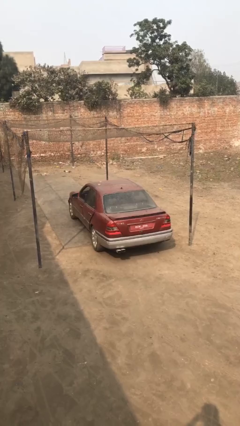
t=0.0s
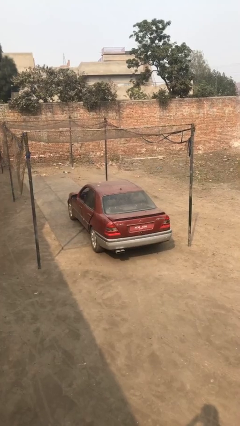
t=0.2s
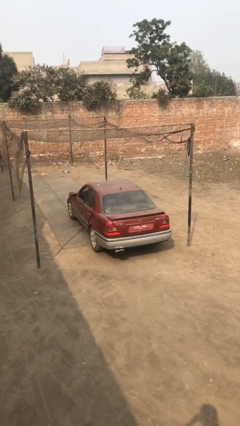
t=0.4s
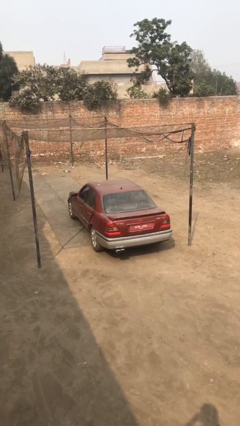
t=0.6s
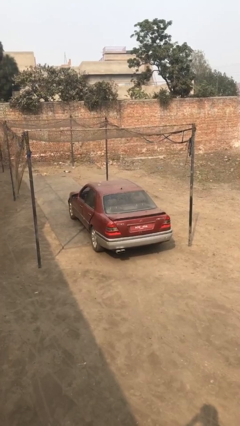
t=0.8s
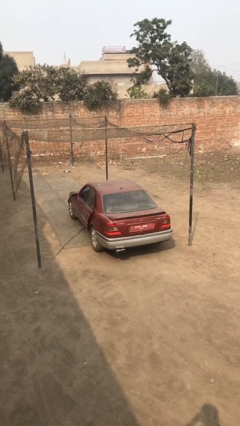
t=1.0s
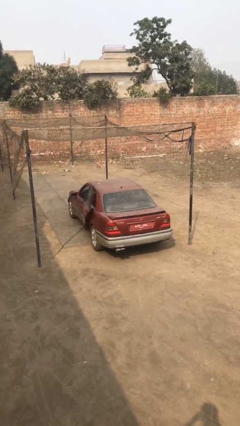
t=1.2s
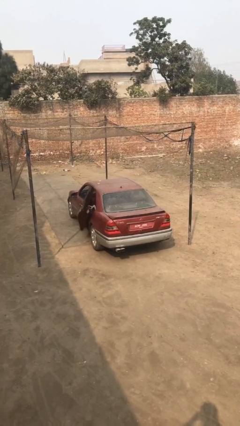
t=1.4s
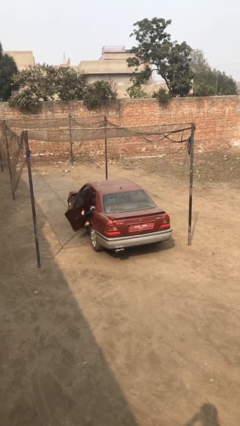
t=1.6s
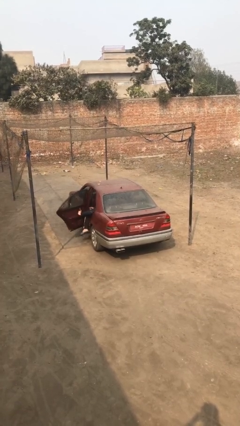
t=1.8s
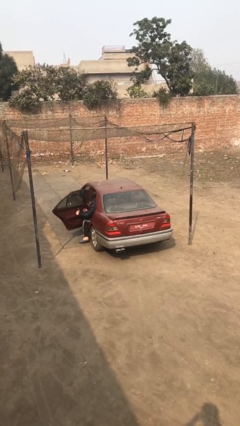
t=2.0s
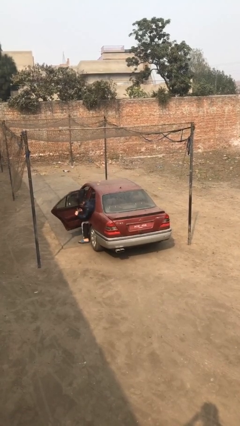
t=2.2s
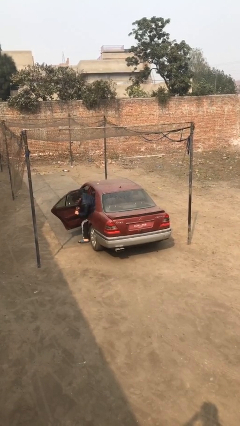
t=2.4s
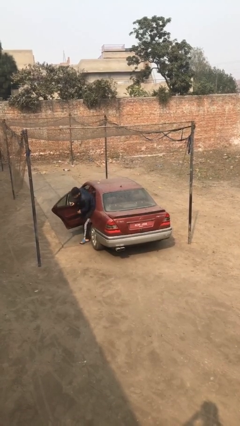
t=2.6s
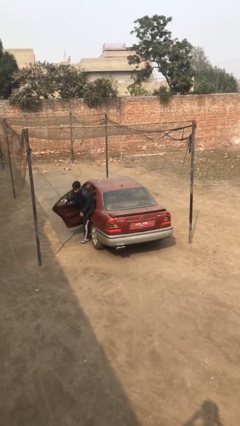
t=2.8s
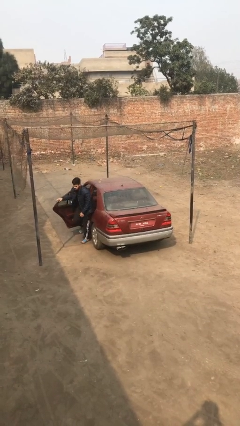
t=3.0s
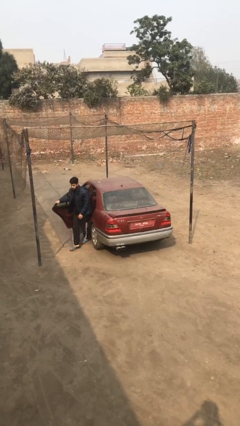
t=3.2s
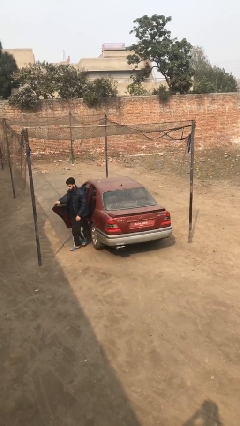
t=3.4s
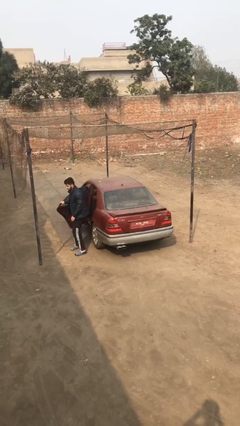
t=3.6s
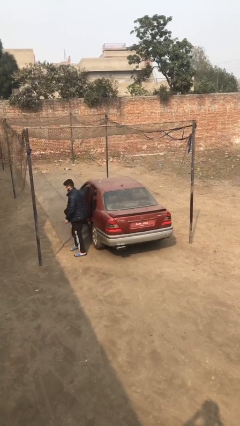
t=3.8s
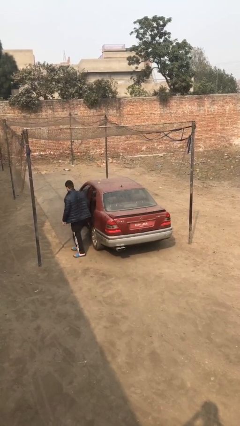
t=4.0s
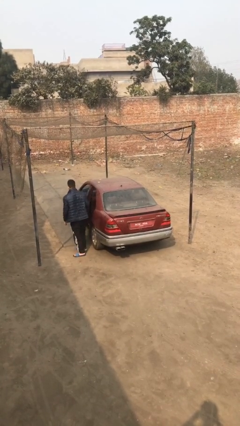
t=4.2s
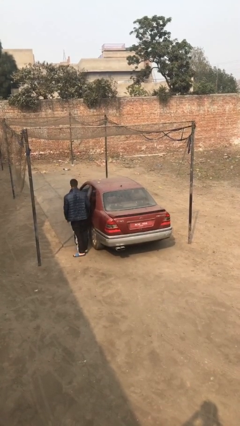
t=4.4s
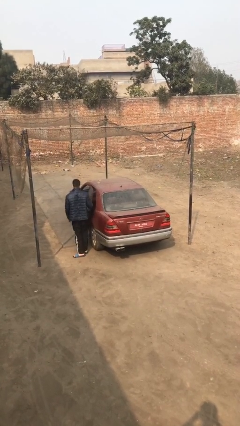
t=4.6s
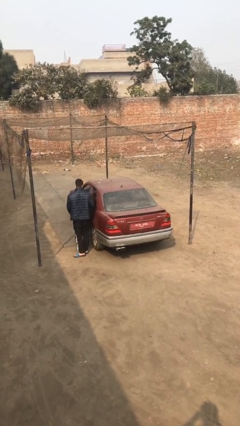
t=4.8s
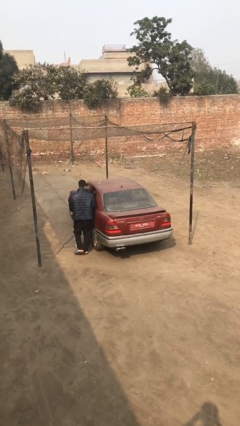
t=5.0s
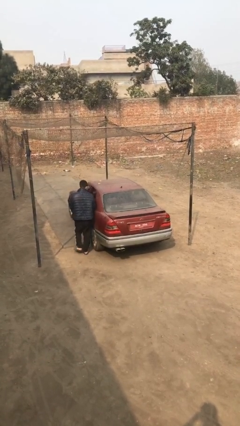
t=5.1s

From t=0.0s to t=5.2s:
car drops off person

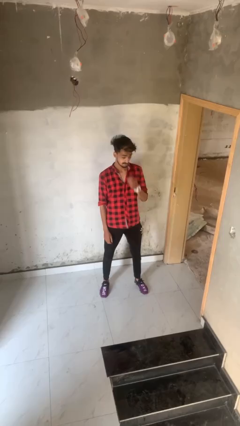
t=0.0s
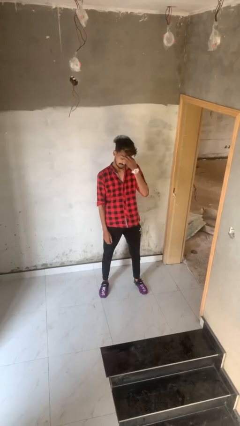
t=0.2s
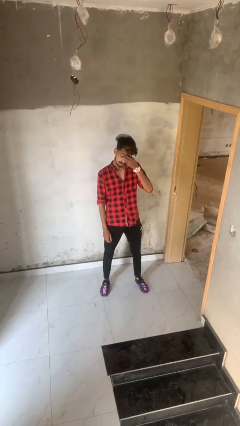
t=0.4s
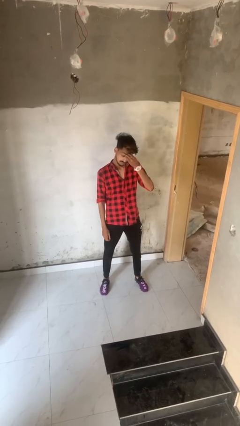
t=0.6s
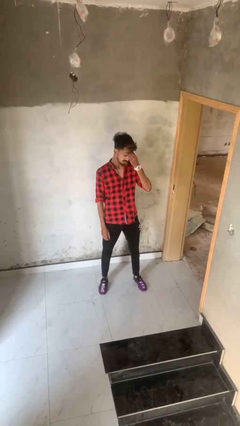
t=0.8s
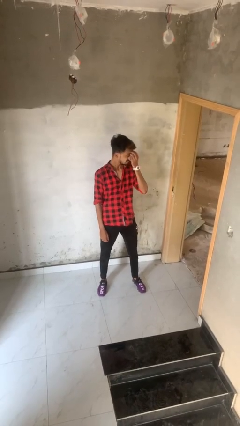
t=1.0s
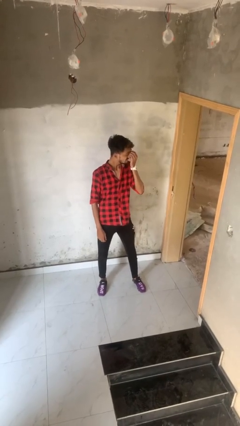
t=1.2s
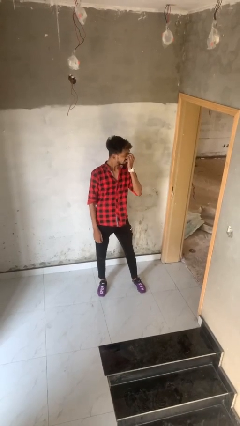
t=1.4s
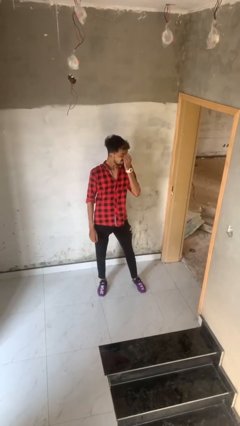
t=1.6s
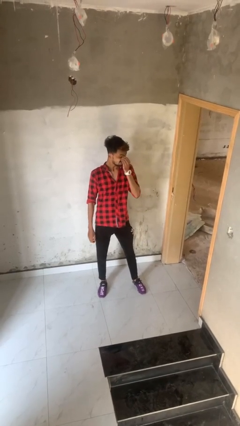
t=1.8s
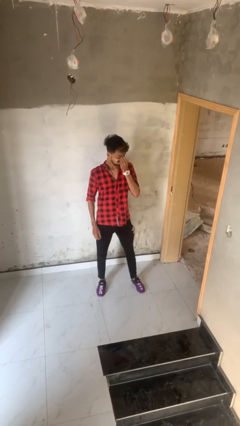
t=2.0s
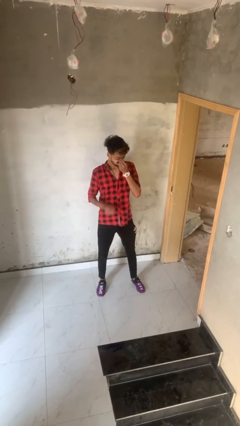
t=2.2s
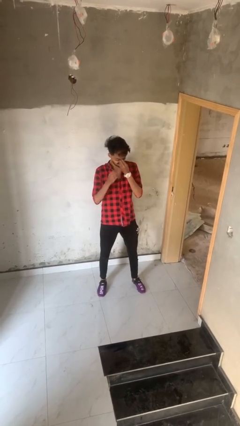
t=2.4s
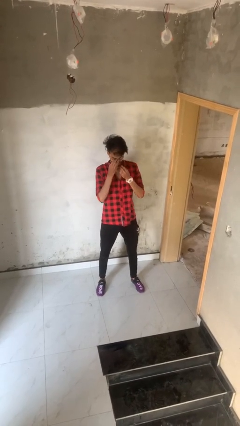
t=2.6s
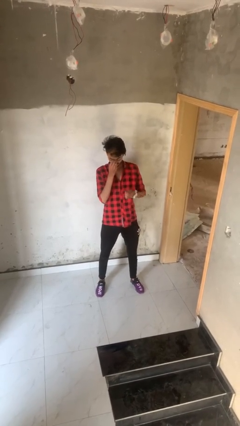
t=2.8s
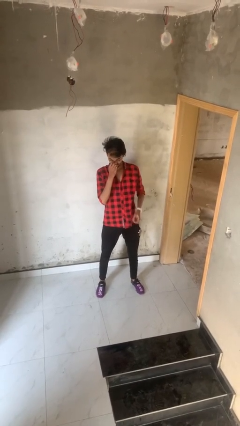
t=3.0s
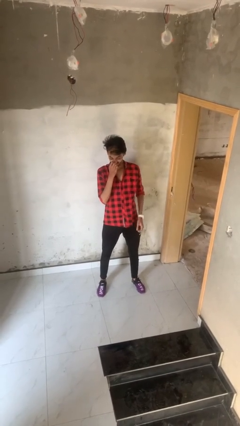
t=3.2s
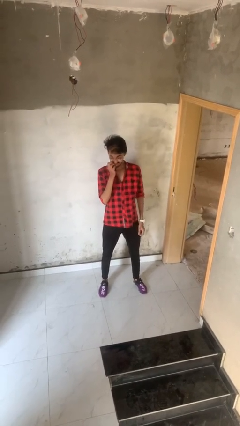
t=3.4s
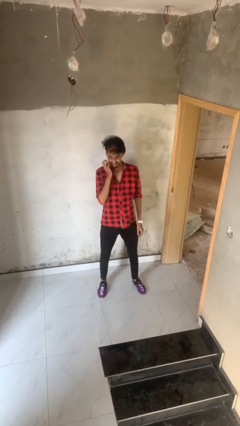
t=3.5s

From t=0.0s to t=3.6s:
person scratches face

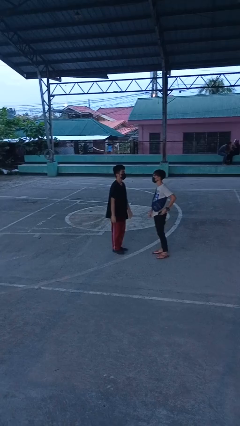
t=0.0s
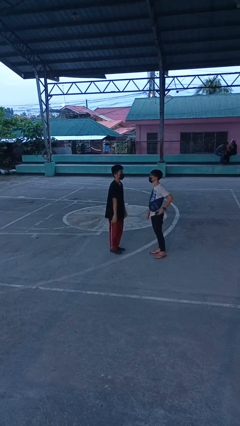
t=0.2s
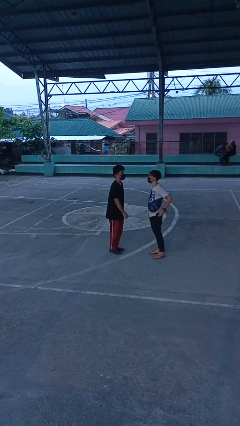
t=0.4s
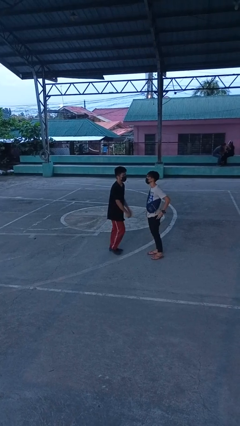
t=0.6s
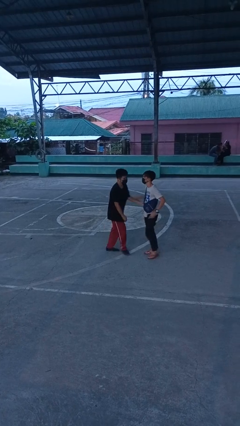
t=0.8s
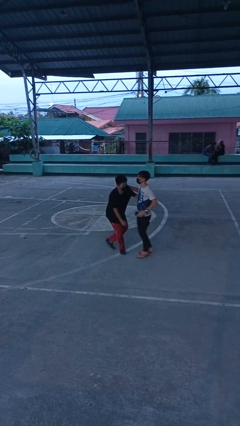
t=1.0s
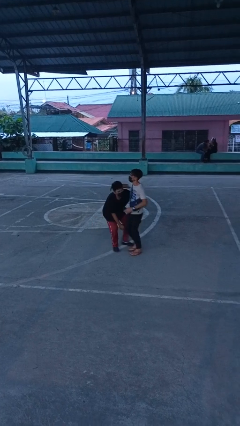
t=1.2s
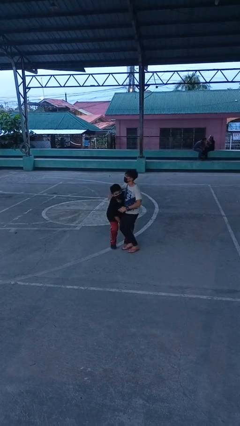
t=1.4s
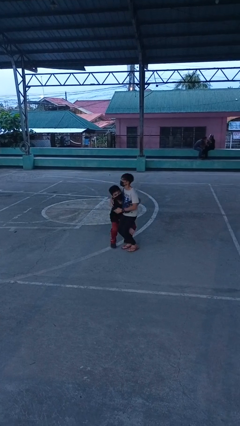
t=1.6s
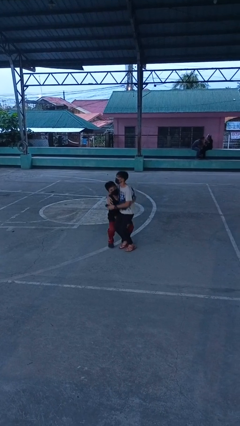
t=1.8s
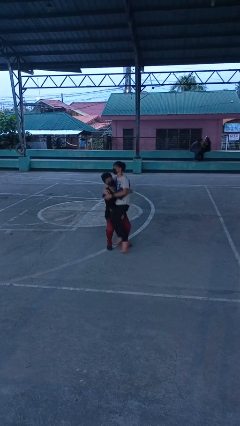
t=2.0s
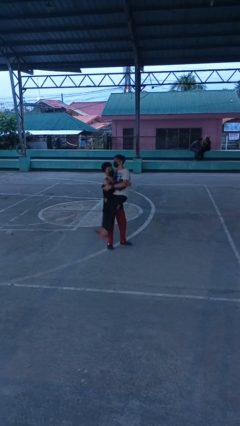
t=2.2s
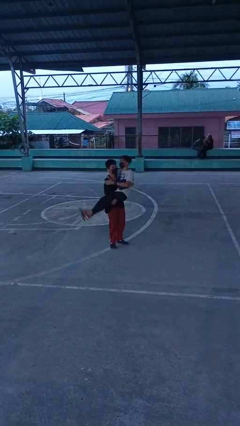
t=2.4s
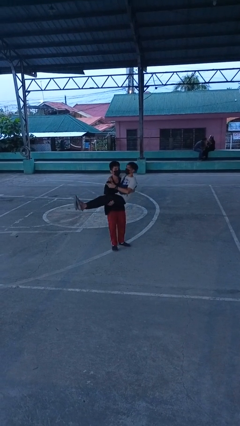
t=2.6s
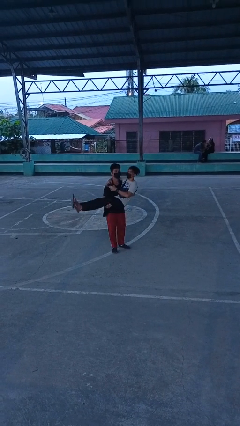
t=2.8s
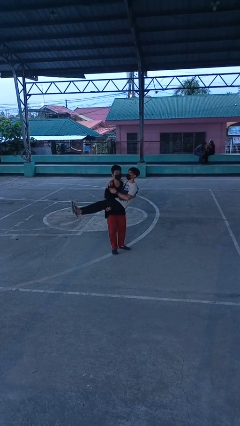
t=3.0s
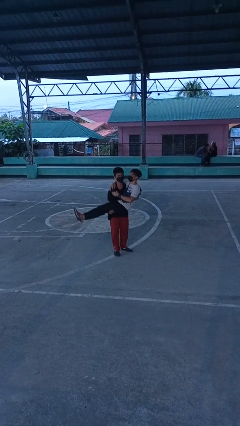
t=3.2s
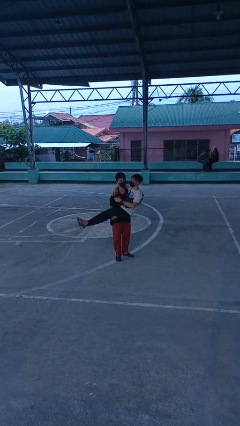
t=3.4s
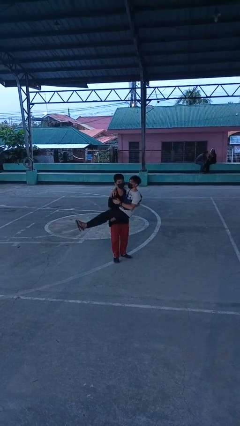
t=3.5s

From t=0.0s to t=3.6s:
person picks up person

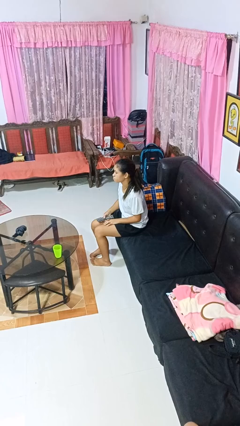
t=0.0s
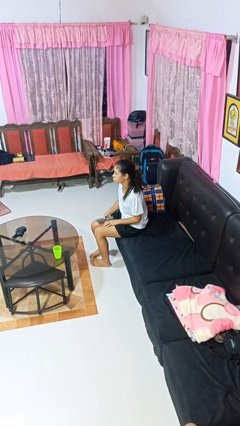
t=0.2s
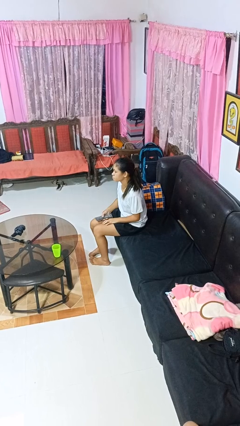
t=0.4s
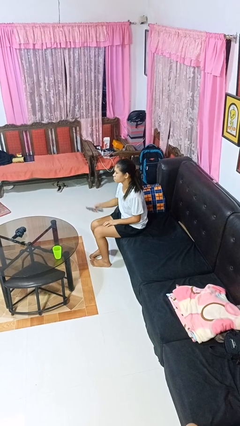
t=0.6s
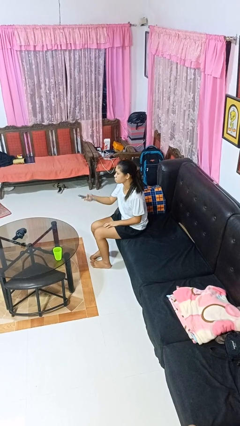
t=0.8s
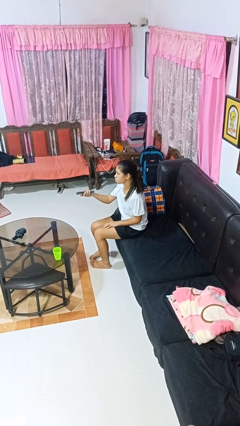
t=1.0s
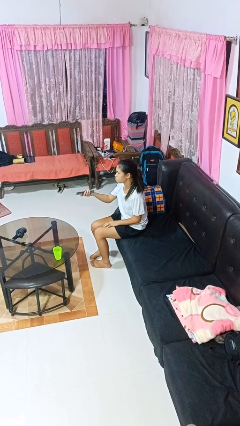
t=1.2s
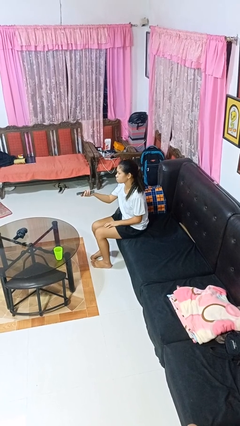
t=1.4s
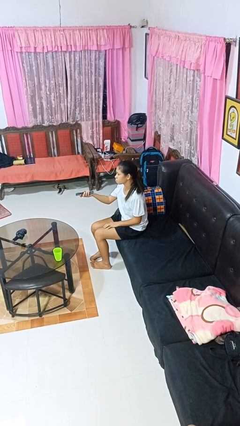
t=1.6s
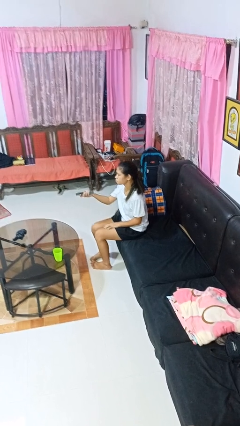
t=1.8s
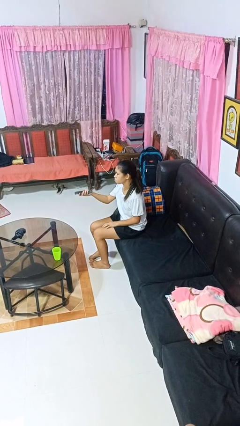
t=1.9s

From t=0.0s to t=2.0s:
person uses television remote

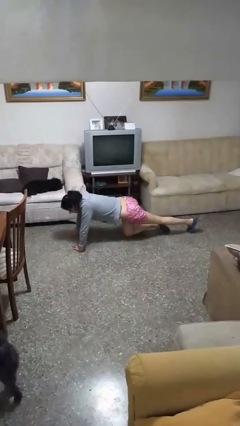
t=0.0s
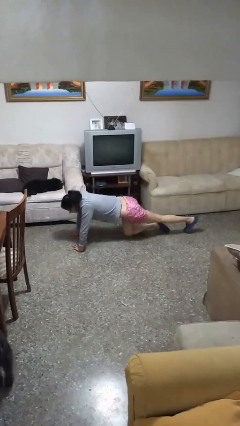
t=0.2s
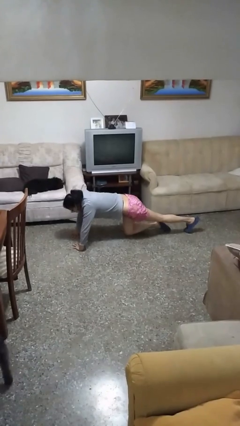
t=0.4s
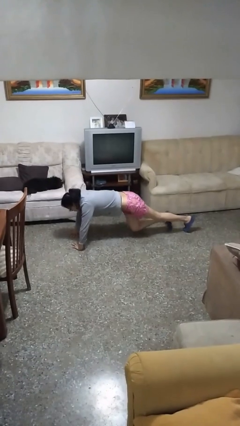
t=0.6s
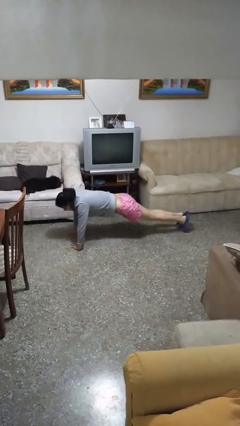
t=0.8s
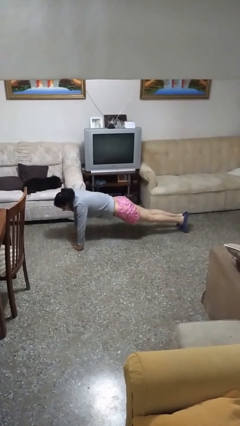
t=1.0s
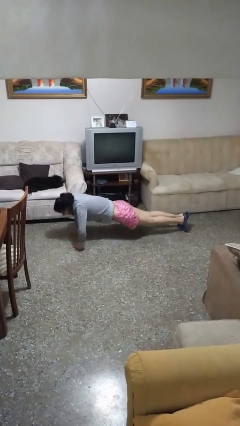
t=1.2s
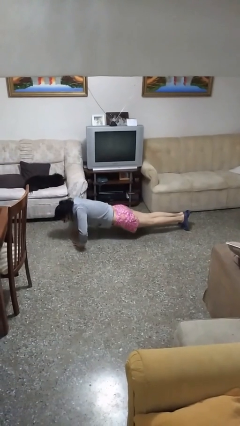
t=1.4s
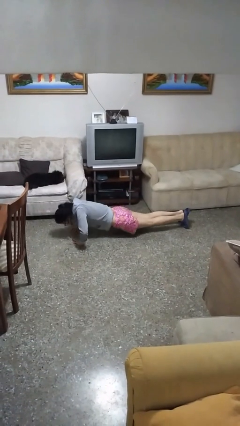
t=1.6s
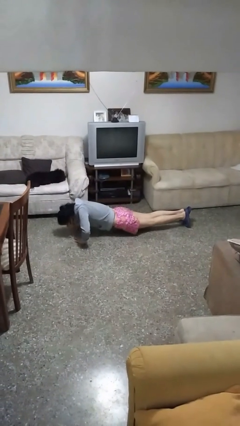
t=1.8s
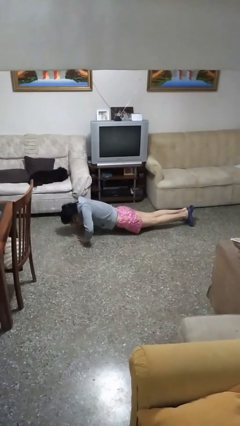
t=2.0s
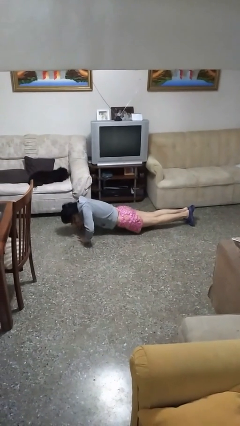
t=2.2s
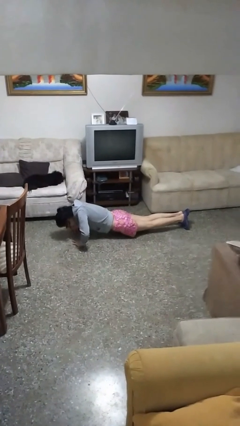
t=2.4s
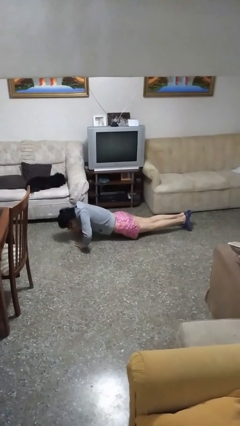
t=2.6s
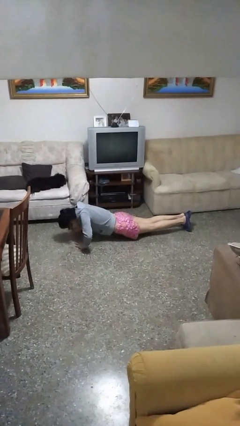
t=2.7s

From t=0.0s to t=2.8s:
person exercises with pushup
